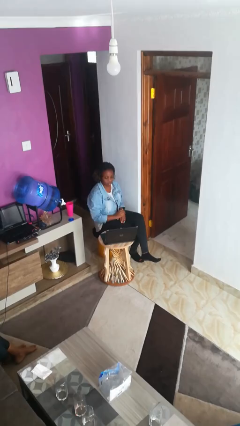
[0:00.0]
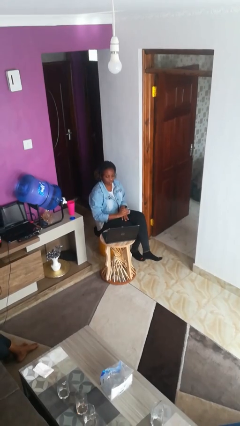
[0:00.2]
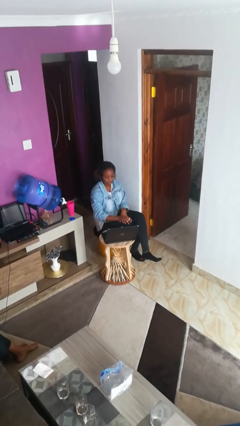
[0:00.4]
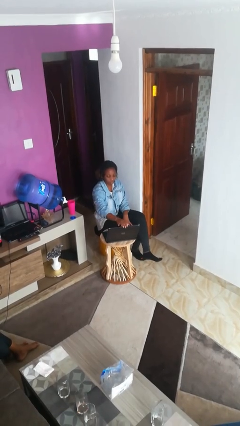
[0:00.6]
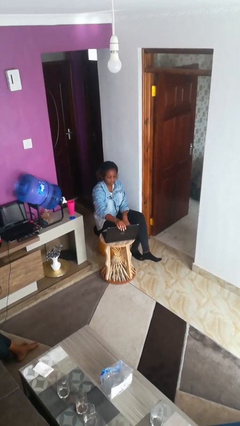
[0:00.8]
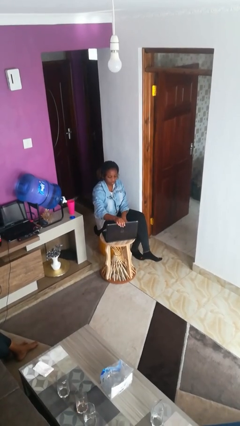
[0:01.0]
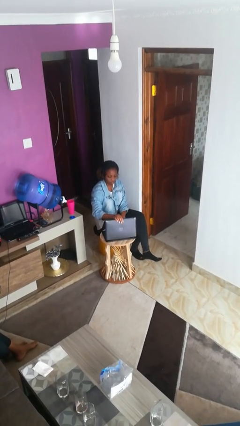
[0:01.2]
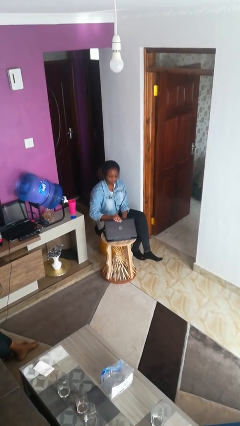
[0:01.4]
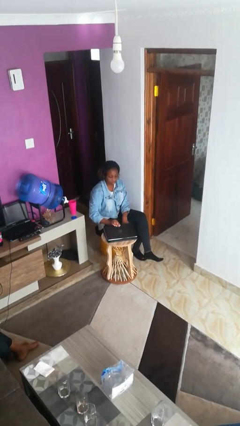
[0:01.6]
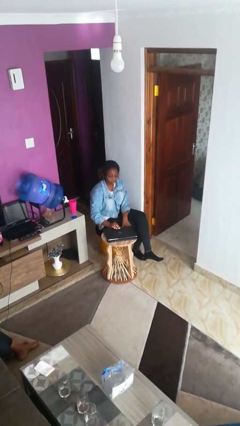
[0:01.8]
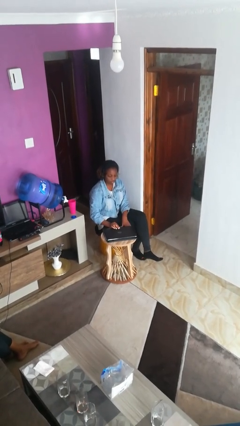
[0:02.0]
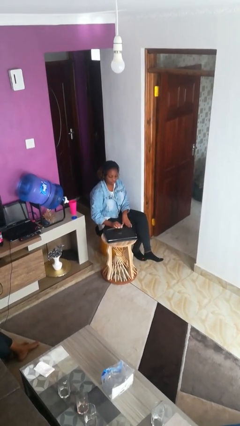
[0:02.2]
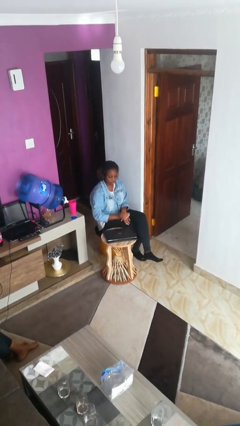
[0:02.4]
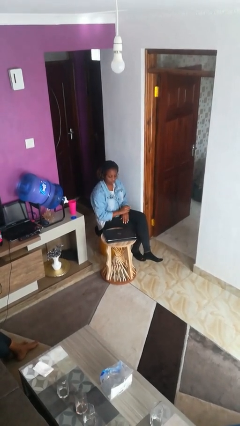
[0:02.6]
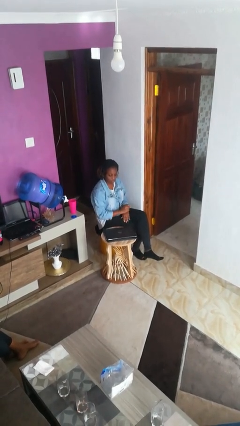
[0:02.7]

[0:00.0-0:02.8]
person closes laptop

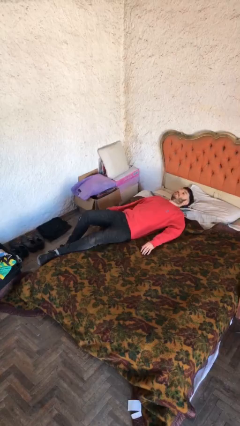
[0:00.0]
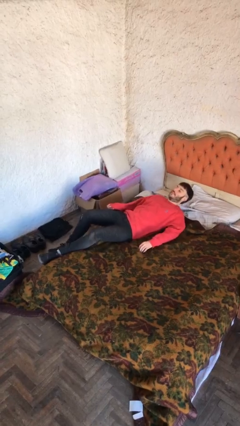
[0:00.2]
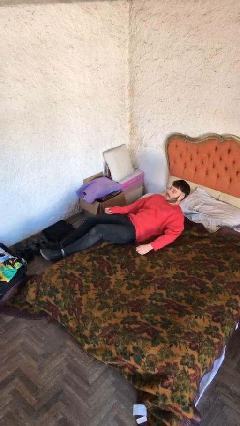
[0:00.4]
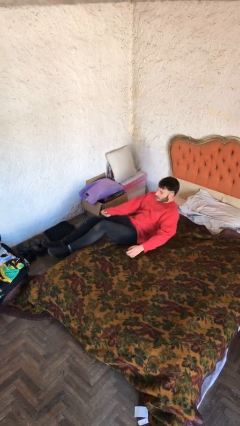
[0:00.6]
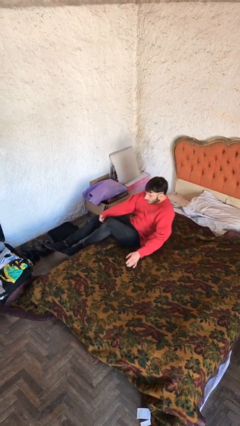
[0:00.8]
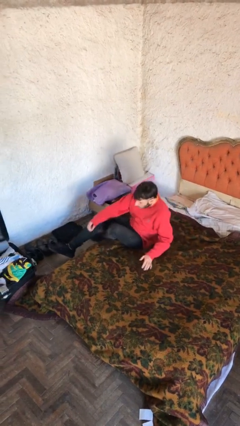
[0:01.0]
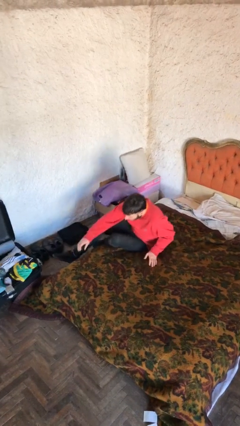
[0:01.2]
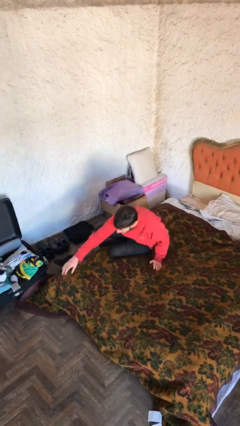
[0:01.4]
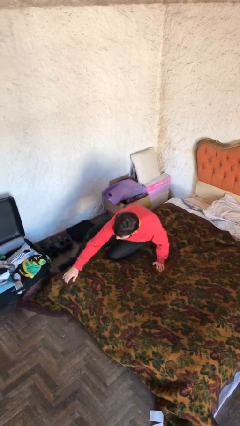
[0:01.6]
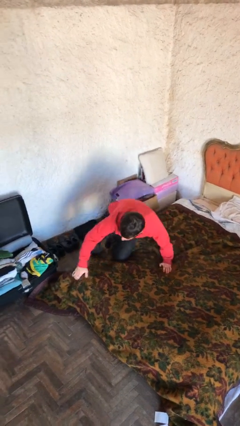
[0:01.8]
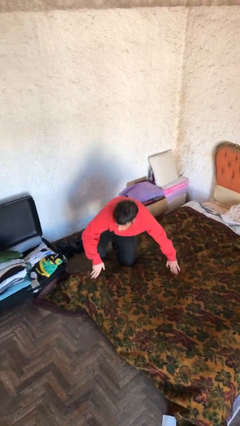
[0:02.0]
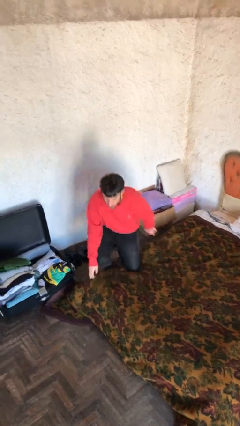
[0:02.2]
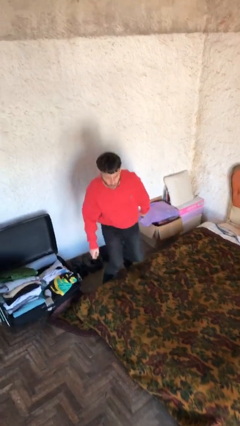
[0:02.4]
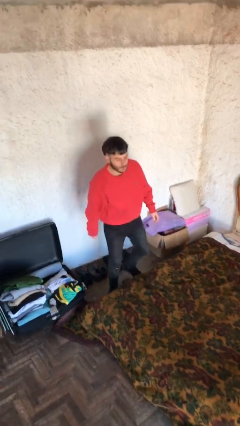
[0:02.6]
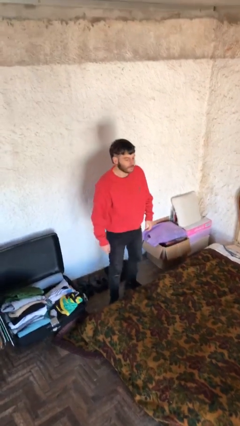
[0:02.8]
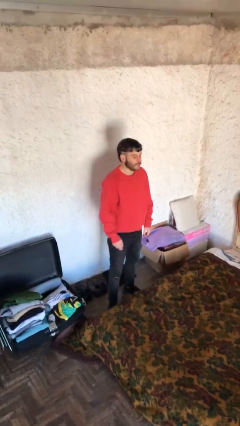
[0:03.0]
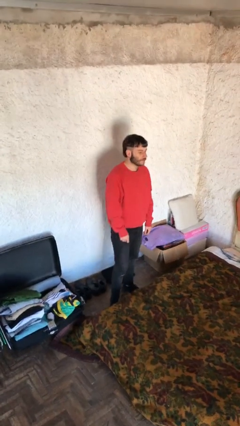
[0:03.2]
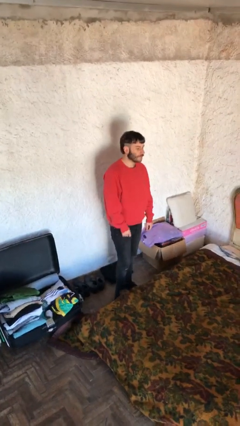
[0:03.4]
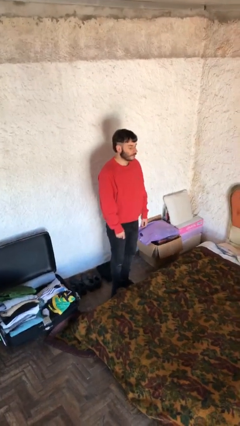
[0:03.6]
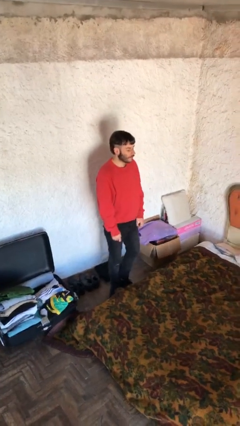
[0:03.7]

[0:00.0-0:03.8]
person stands up

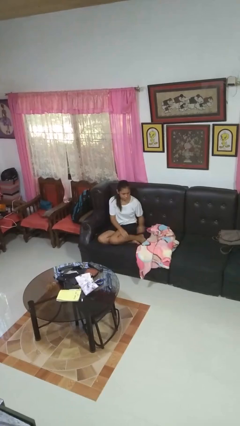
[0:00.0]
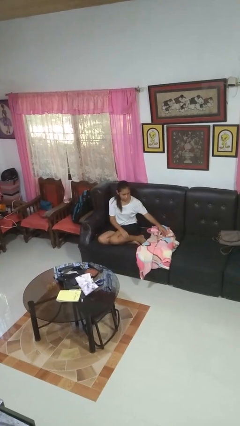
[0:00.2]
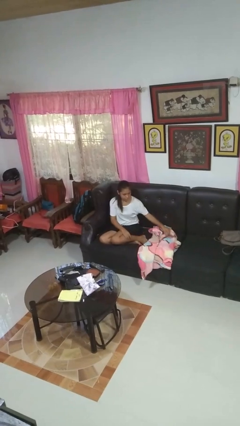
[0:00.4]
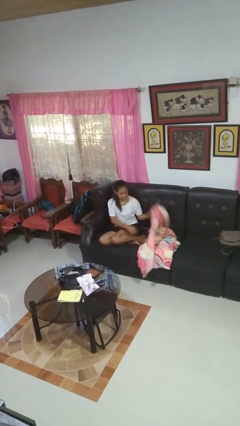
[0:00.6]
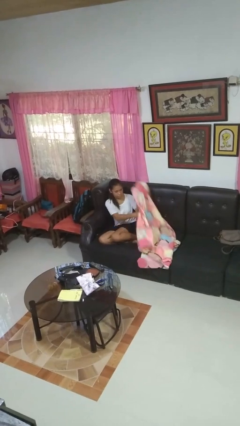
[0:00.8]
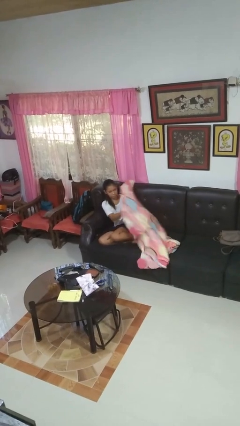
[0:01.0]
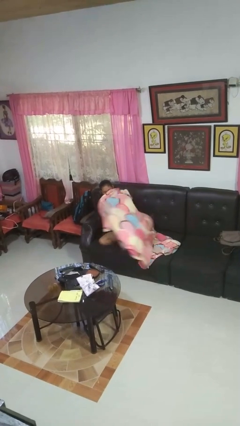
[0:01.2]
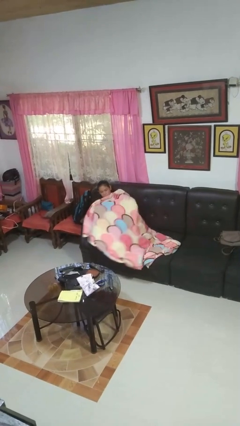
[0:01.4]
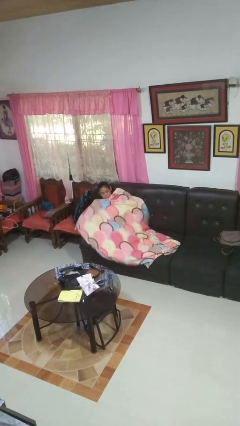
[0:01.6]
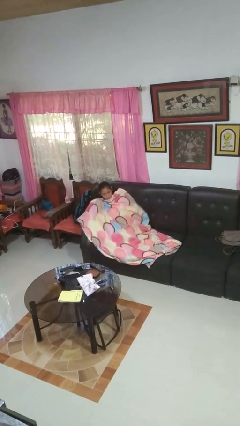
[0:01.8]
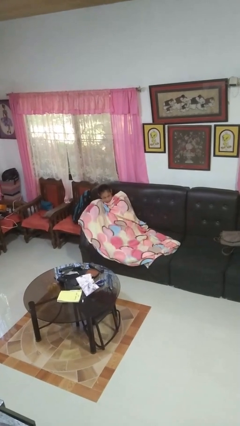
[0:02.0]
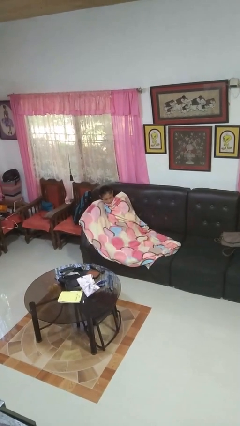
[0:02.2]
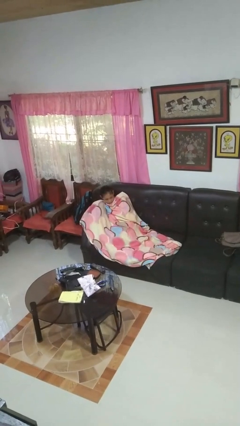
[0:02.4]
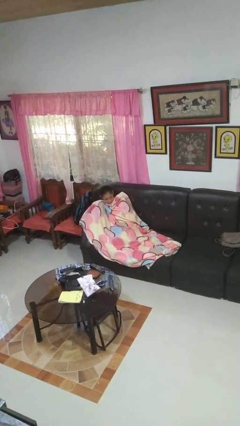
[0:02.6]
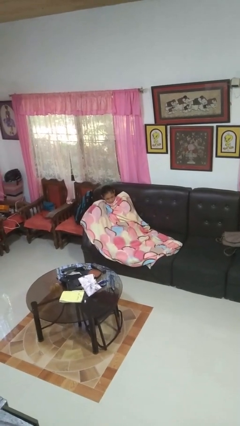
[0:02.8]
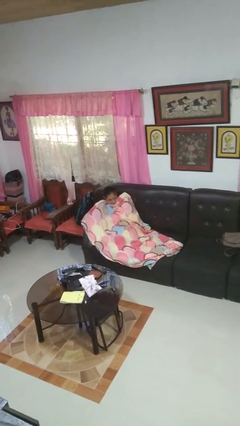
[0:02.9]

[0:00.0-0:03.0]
person covers with blanket

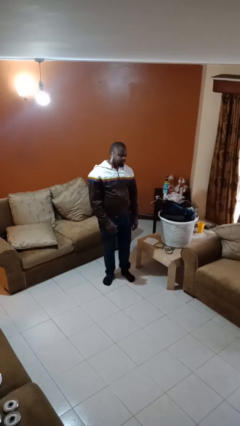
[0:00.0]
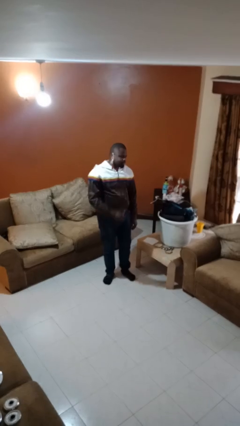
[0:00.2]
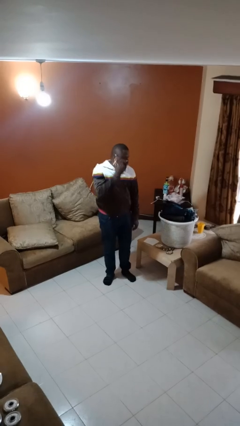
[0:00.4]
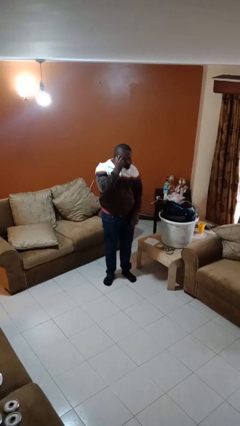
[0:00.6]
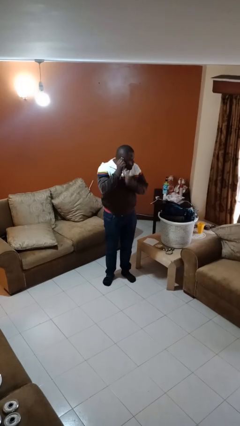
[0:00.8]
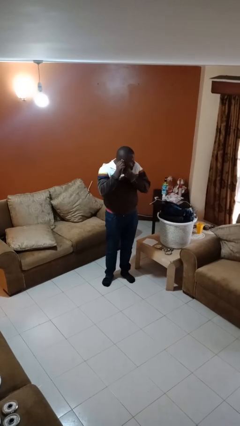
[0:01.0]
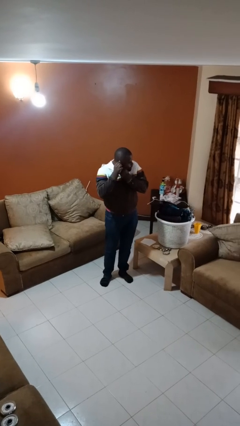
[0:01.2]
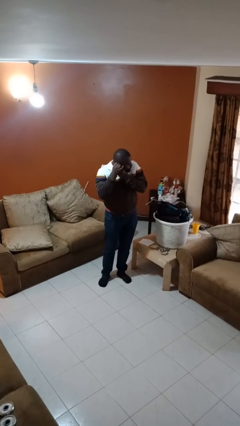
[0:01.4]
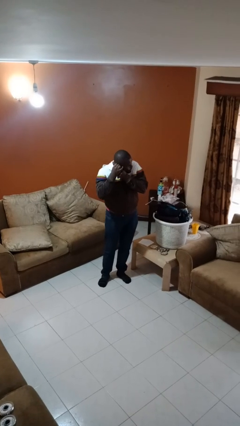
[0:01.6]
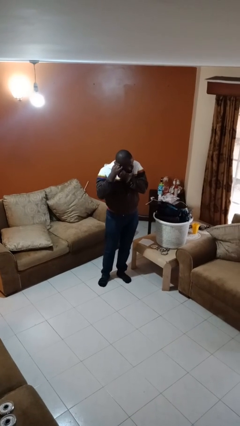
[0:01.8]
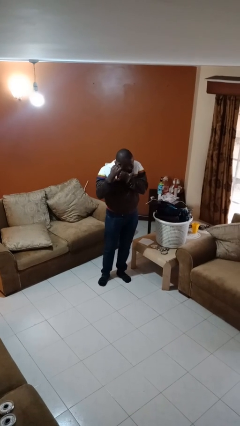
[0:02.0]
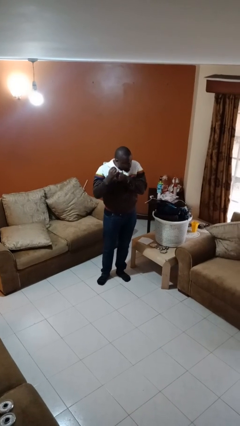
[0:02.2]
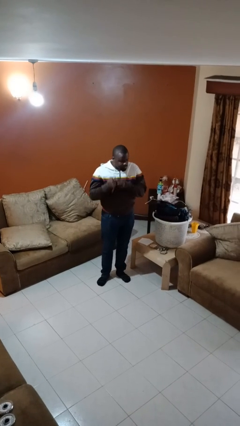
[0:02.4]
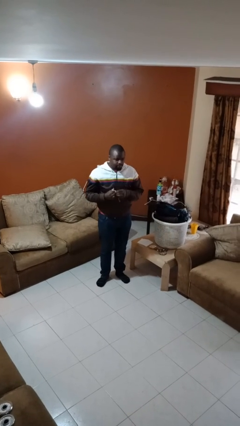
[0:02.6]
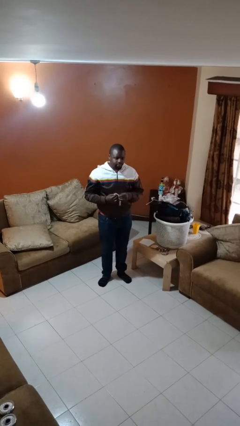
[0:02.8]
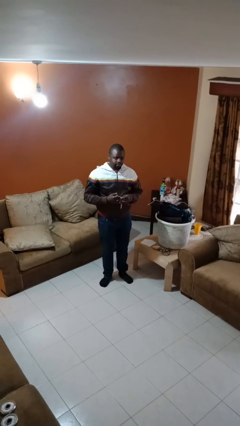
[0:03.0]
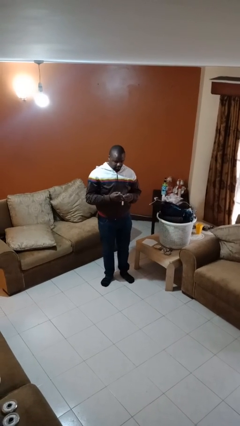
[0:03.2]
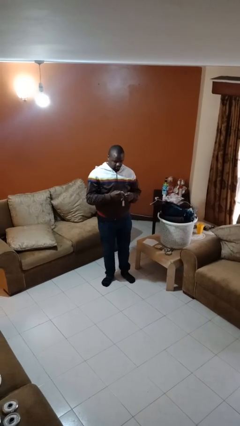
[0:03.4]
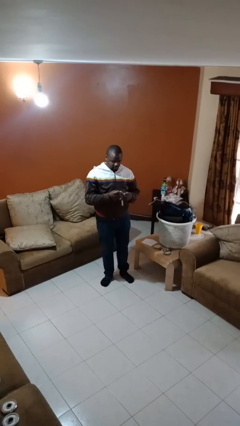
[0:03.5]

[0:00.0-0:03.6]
person takes off earrings

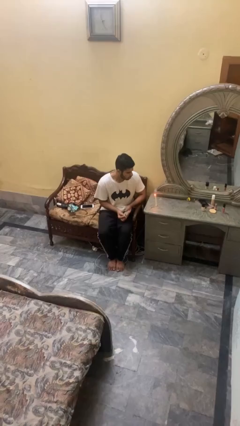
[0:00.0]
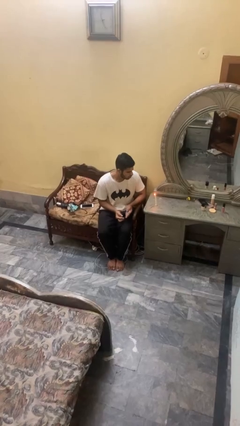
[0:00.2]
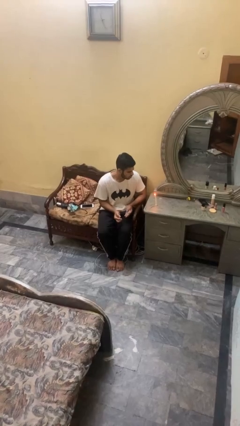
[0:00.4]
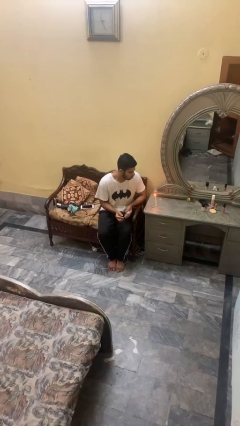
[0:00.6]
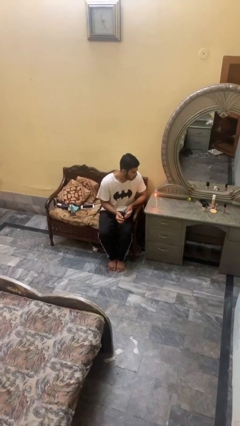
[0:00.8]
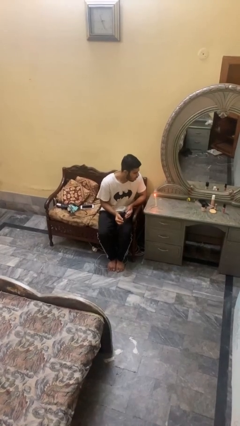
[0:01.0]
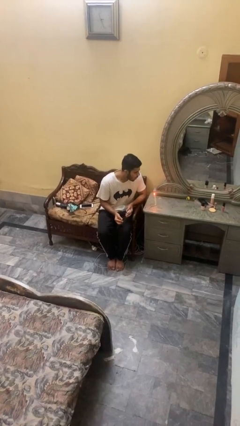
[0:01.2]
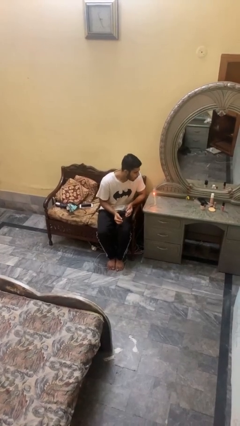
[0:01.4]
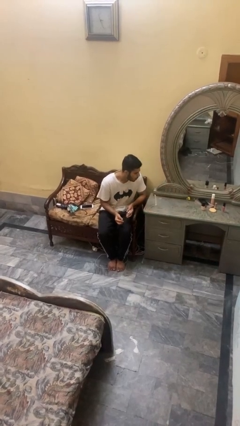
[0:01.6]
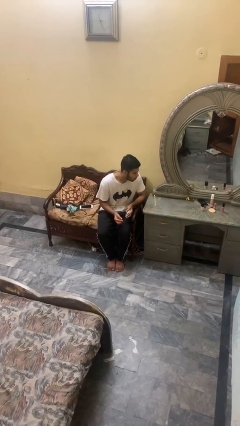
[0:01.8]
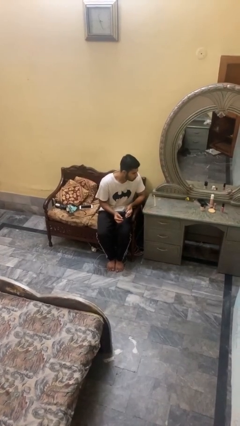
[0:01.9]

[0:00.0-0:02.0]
person extinguishes candle

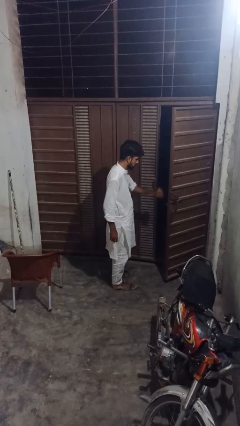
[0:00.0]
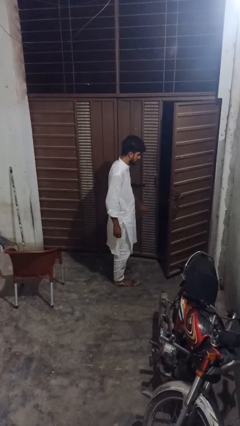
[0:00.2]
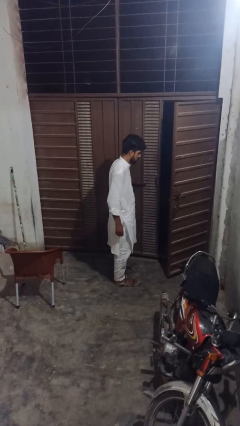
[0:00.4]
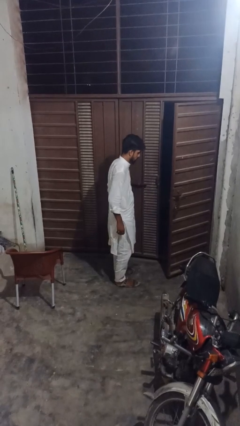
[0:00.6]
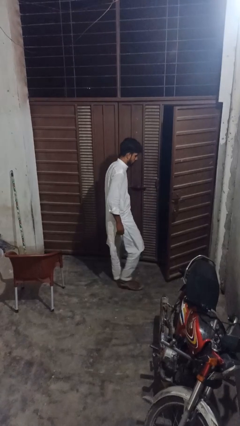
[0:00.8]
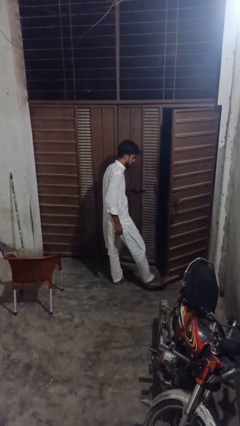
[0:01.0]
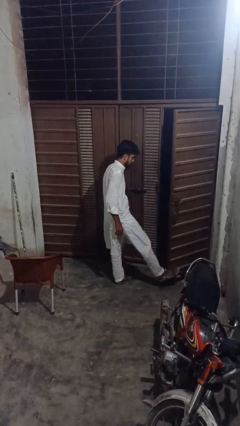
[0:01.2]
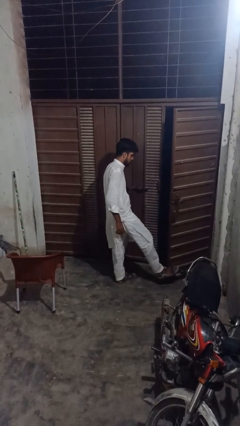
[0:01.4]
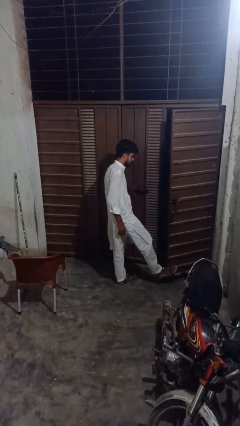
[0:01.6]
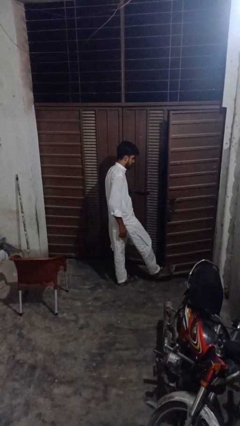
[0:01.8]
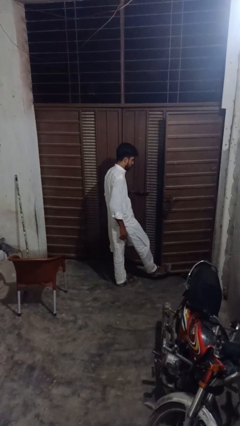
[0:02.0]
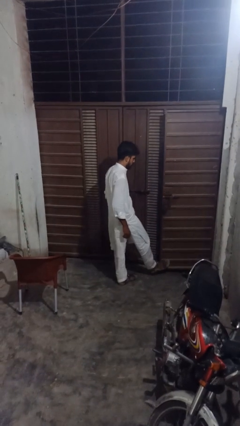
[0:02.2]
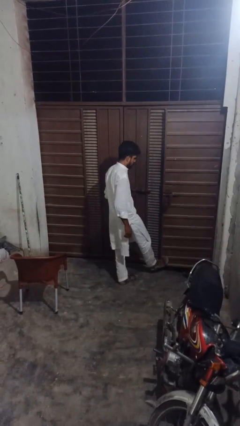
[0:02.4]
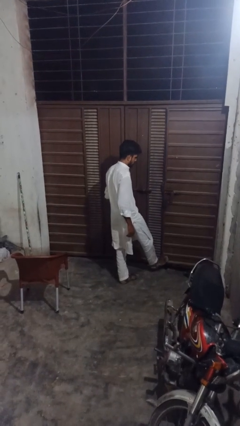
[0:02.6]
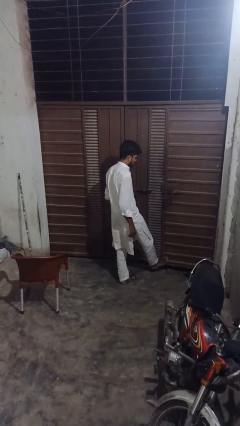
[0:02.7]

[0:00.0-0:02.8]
person closes door with foot
